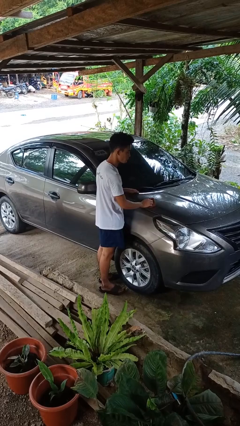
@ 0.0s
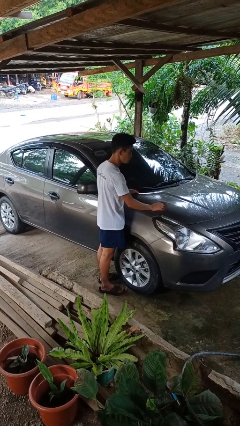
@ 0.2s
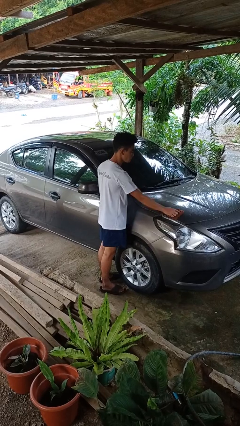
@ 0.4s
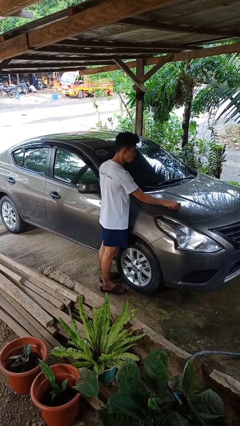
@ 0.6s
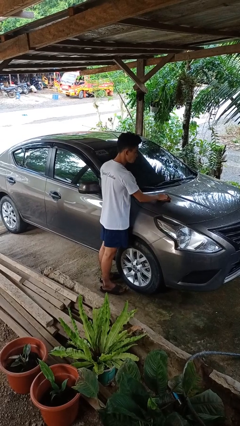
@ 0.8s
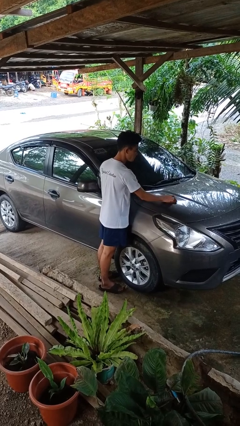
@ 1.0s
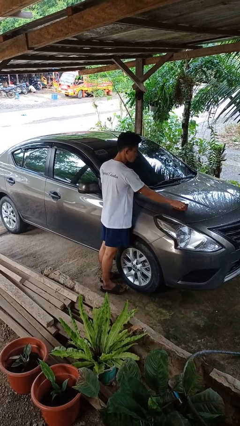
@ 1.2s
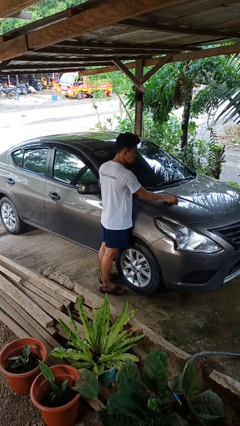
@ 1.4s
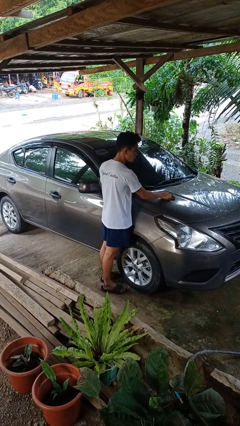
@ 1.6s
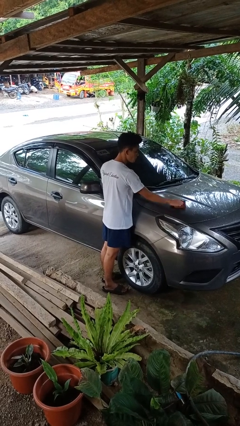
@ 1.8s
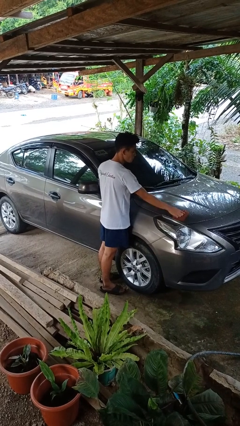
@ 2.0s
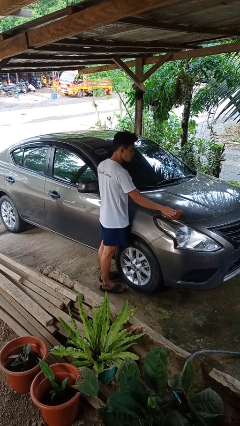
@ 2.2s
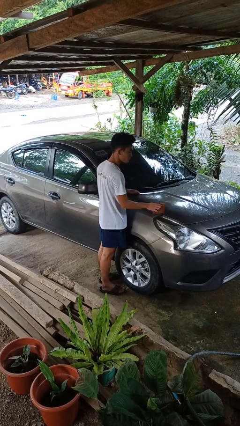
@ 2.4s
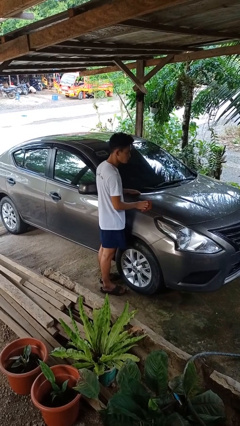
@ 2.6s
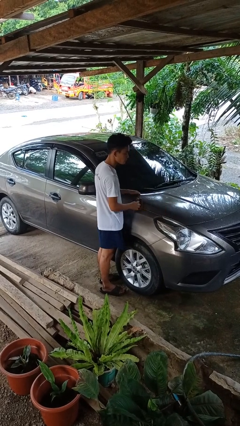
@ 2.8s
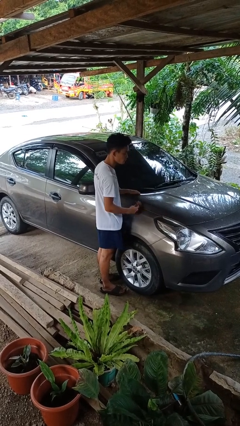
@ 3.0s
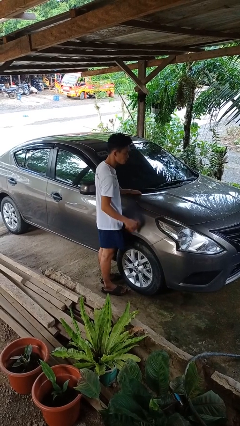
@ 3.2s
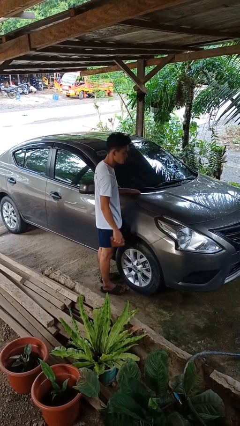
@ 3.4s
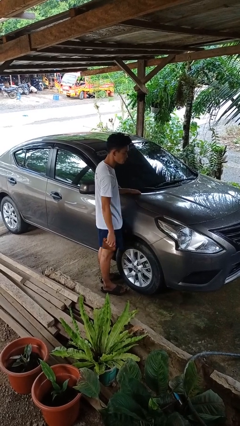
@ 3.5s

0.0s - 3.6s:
person polishes car with rag

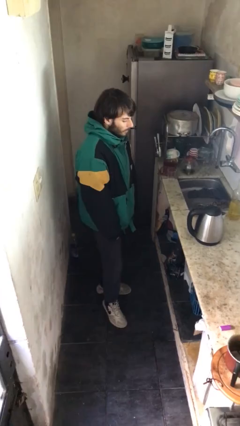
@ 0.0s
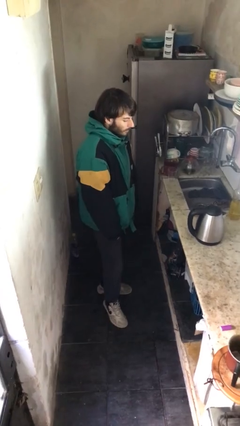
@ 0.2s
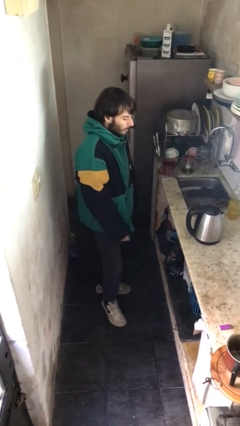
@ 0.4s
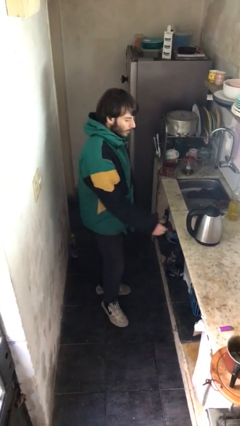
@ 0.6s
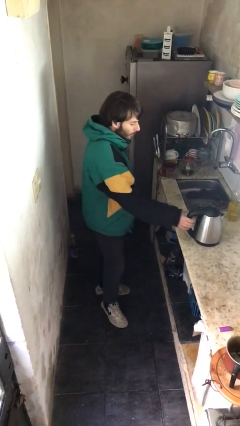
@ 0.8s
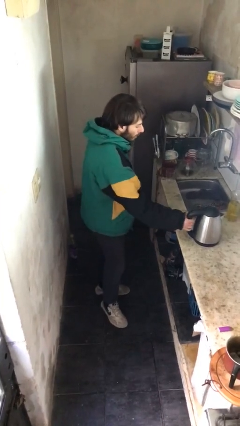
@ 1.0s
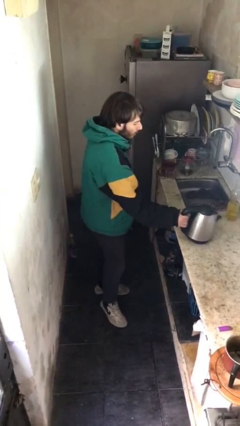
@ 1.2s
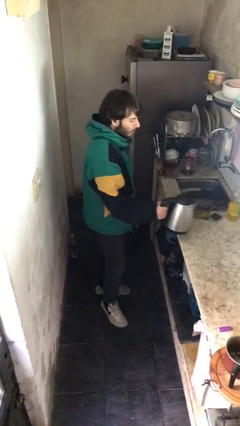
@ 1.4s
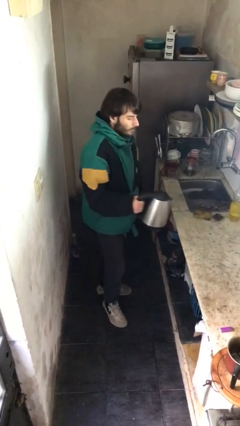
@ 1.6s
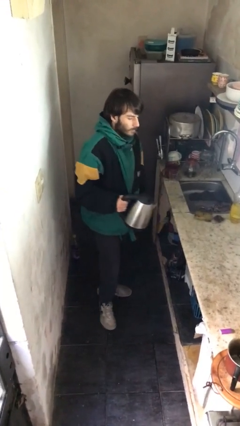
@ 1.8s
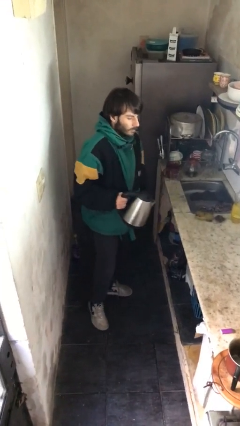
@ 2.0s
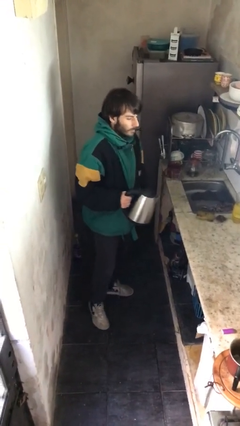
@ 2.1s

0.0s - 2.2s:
person picks up object from countertop

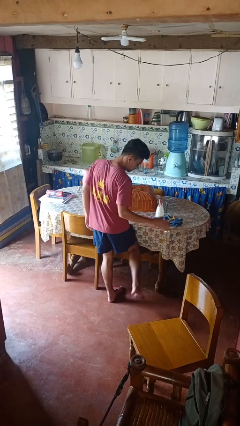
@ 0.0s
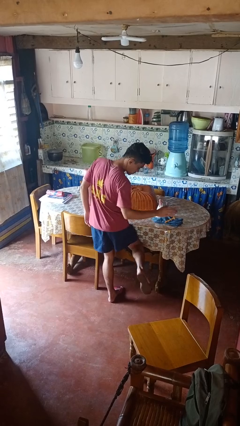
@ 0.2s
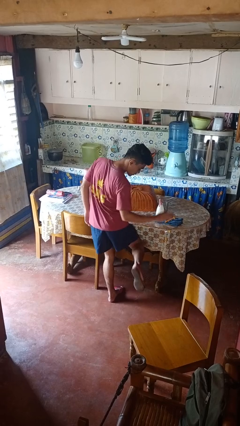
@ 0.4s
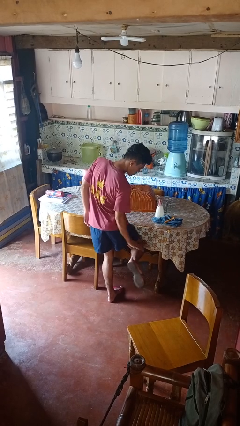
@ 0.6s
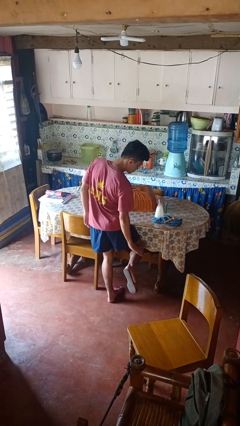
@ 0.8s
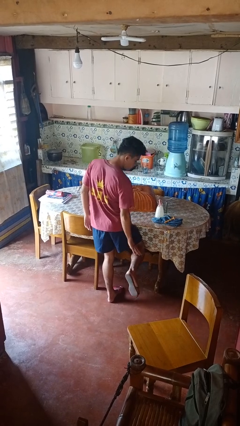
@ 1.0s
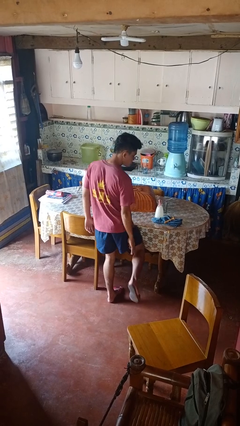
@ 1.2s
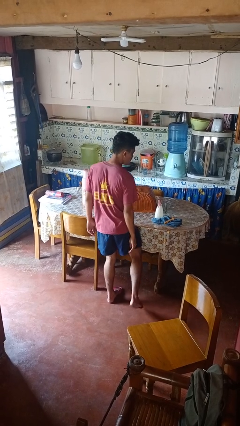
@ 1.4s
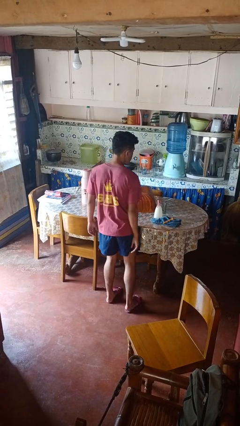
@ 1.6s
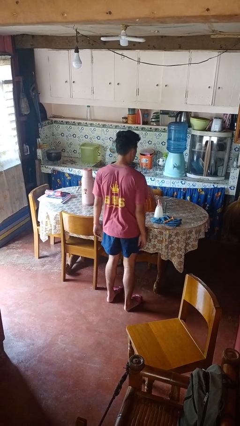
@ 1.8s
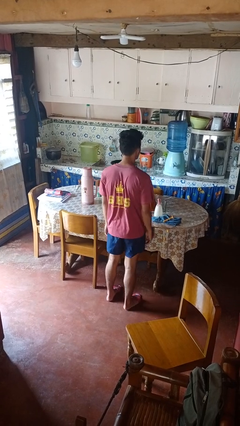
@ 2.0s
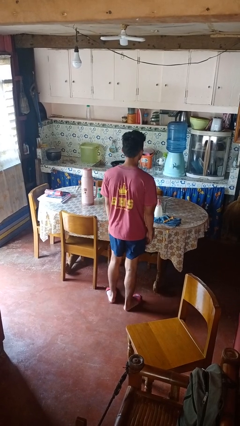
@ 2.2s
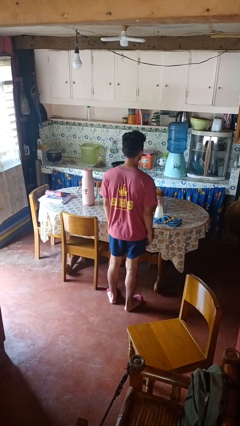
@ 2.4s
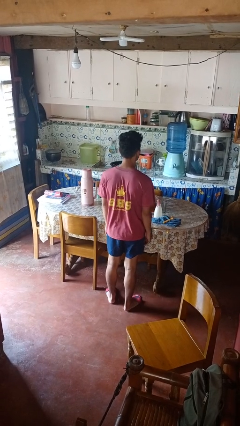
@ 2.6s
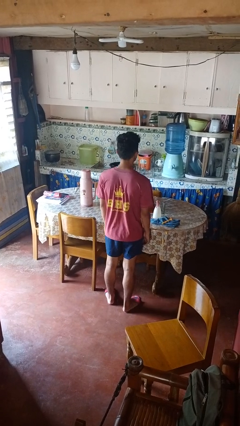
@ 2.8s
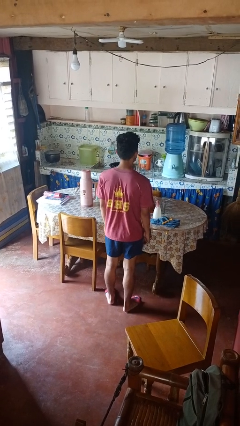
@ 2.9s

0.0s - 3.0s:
person swats bug

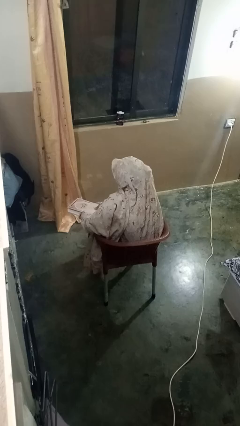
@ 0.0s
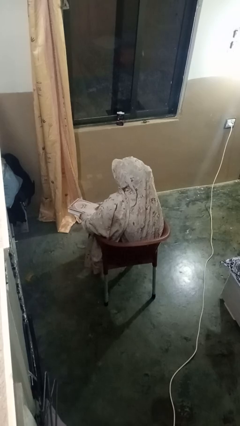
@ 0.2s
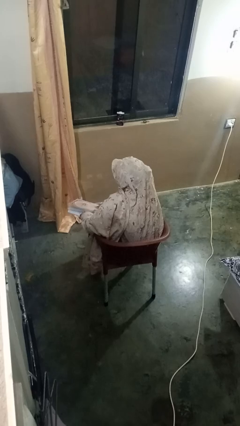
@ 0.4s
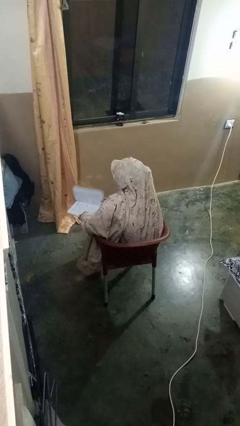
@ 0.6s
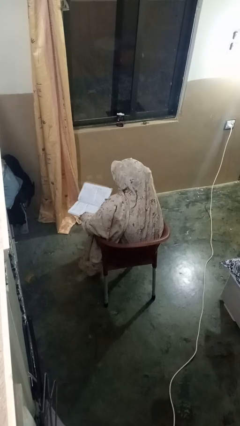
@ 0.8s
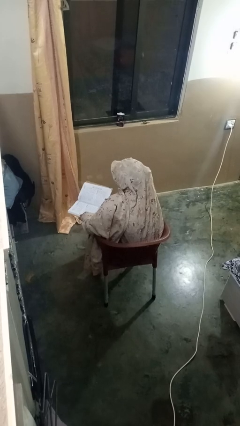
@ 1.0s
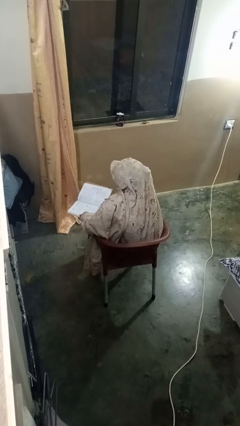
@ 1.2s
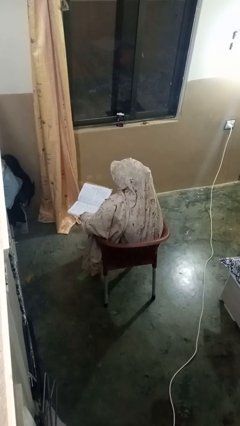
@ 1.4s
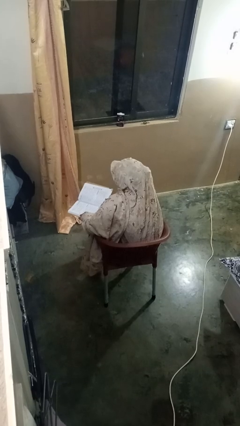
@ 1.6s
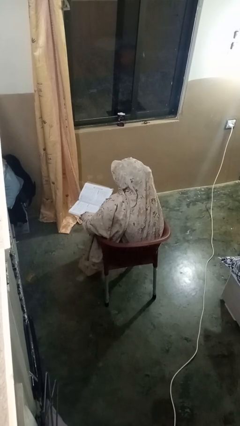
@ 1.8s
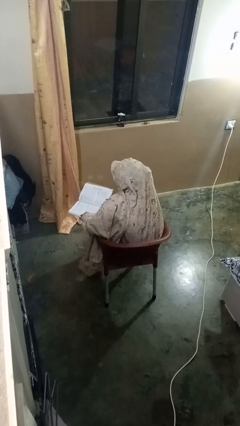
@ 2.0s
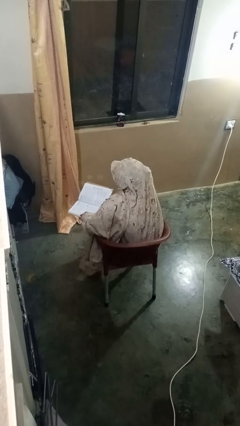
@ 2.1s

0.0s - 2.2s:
person reads book

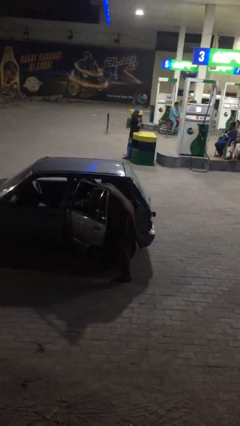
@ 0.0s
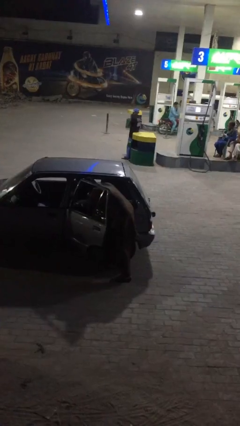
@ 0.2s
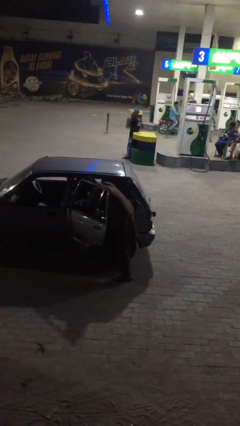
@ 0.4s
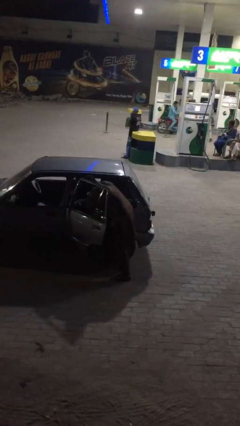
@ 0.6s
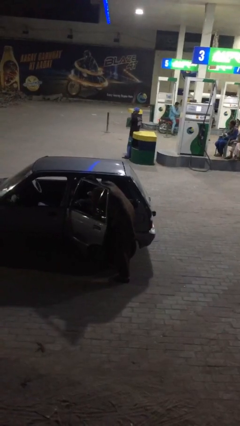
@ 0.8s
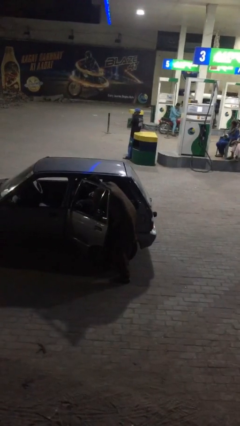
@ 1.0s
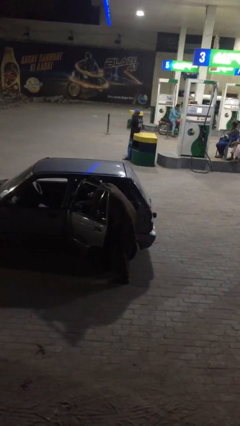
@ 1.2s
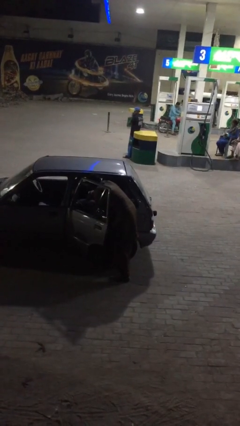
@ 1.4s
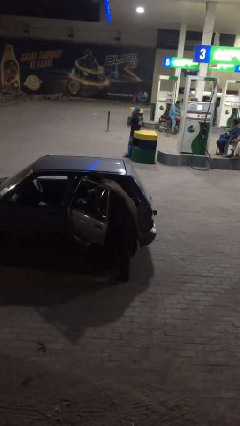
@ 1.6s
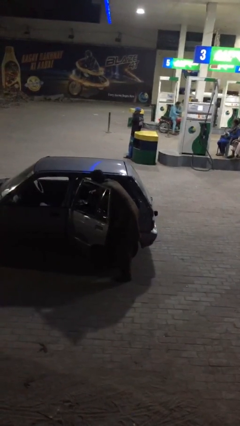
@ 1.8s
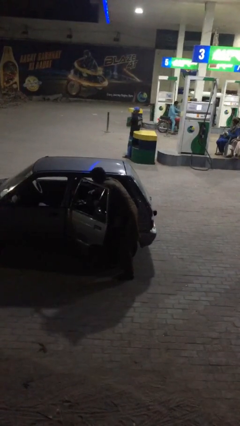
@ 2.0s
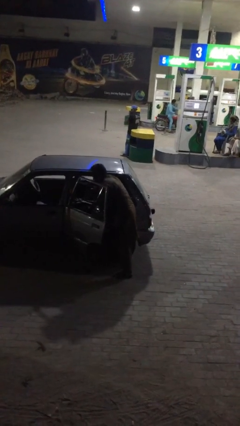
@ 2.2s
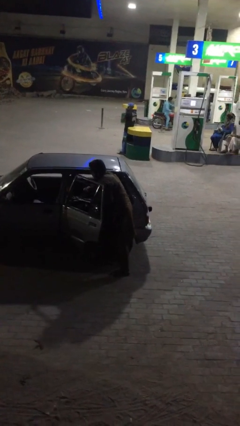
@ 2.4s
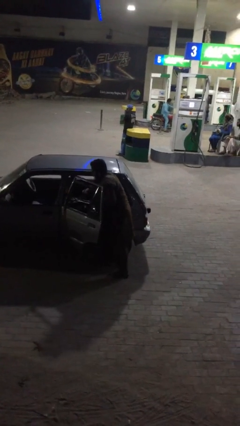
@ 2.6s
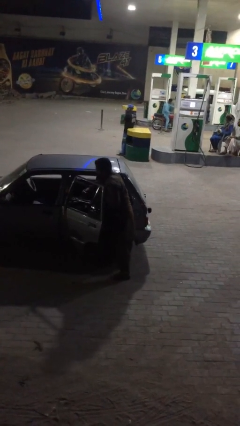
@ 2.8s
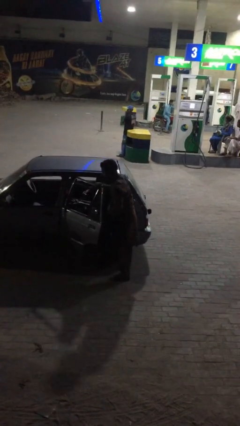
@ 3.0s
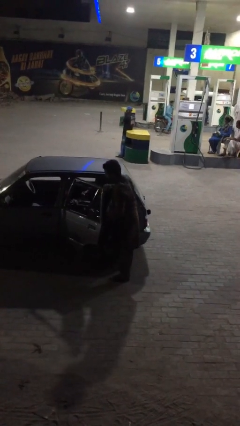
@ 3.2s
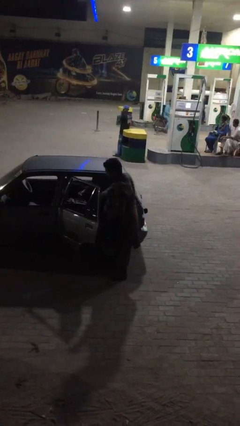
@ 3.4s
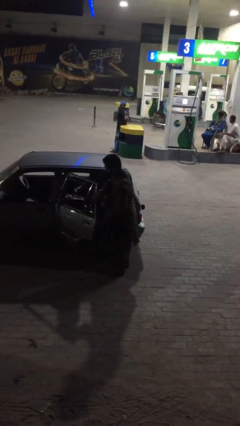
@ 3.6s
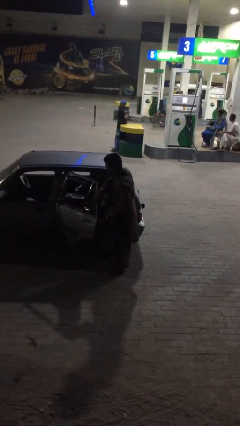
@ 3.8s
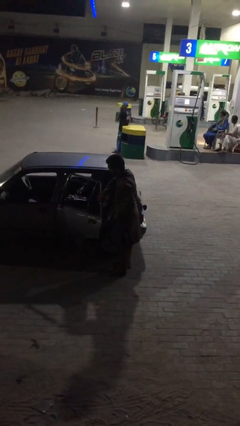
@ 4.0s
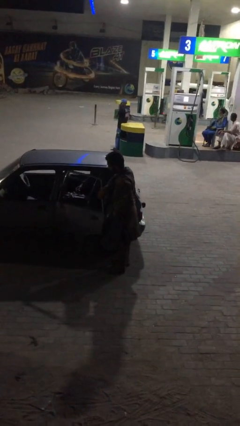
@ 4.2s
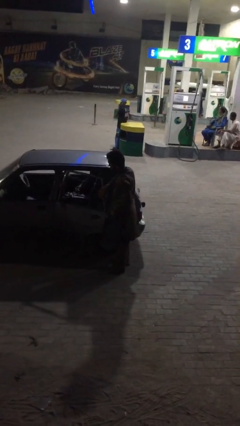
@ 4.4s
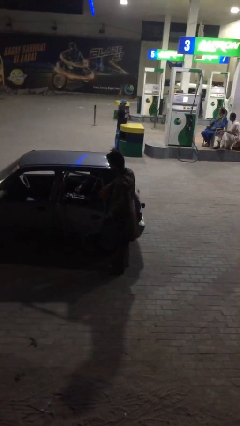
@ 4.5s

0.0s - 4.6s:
person unloads car

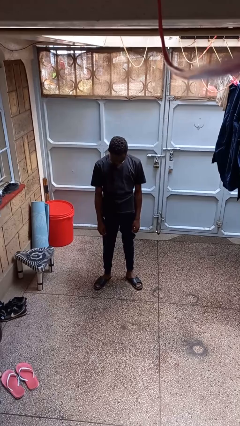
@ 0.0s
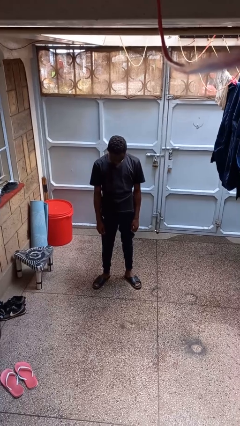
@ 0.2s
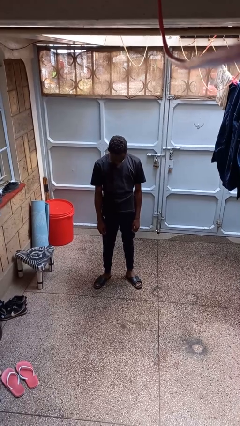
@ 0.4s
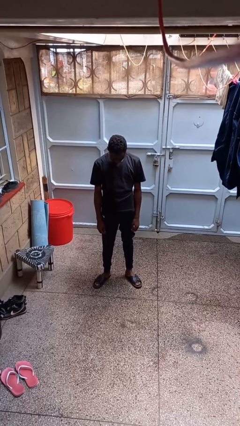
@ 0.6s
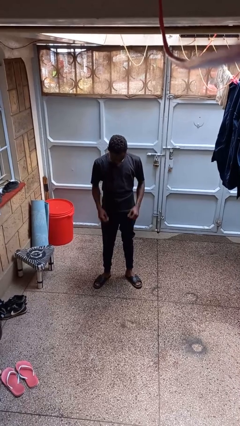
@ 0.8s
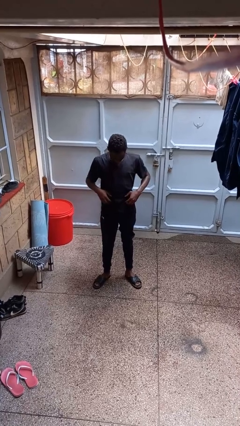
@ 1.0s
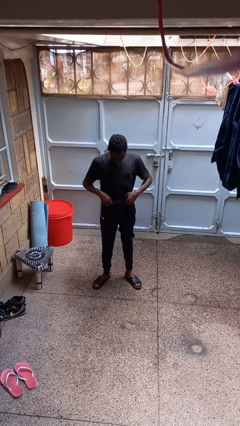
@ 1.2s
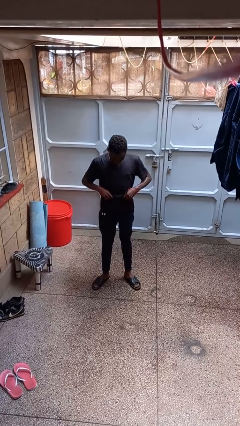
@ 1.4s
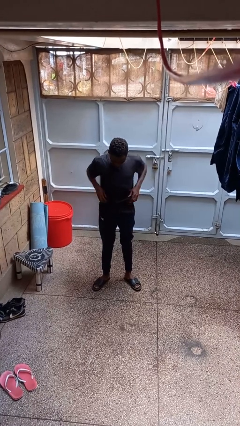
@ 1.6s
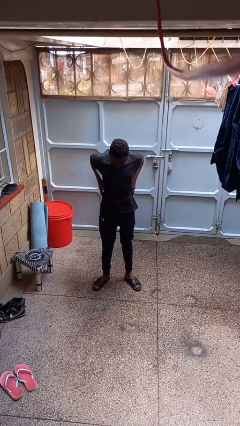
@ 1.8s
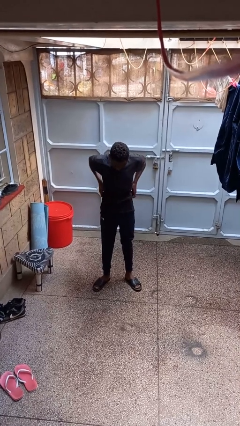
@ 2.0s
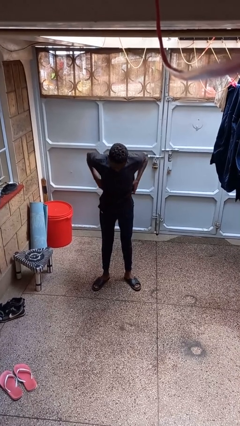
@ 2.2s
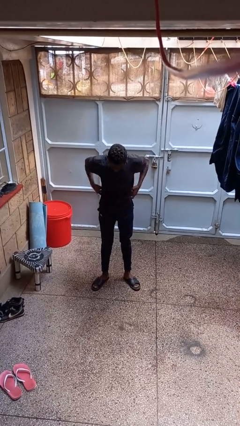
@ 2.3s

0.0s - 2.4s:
person hikes up pants
